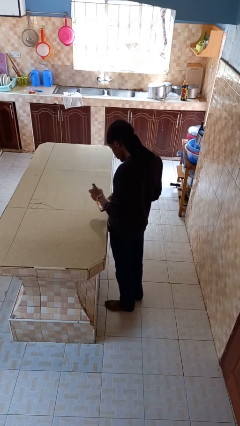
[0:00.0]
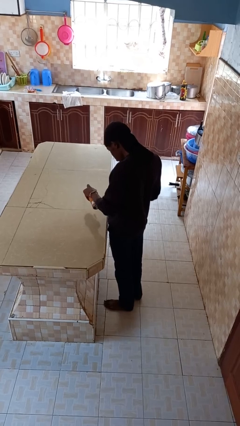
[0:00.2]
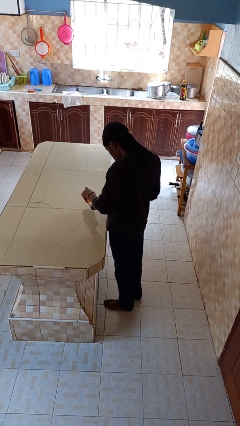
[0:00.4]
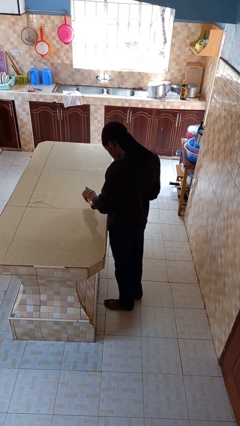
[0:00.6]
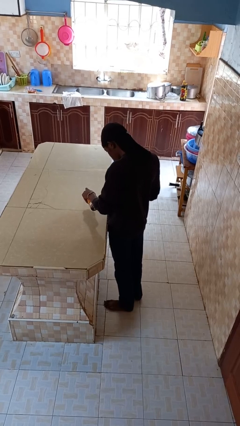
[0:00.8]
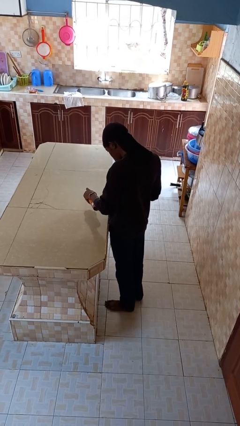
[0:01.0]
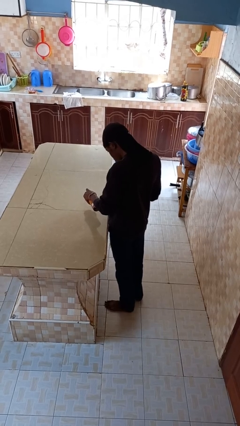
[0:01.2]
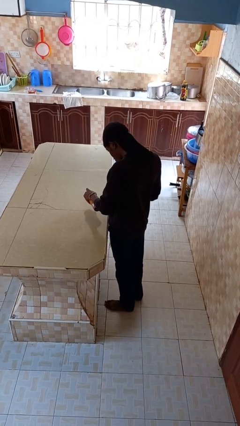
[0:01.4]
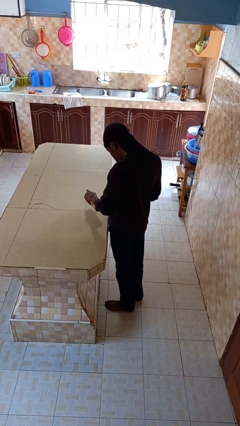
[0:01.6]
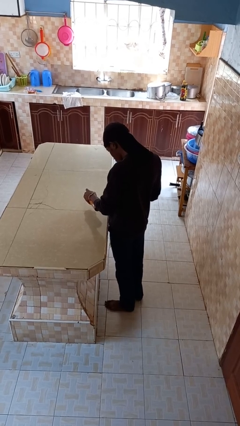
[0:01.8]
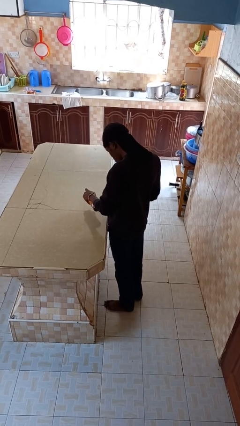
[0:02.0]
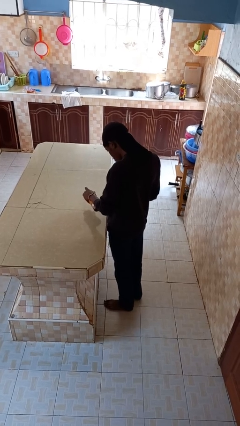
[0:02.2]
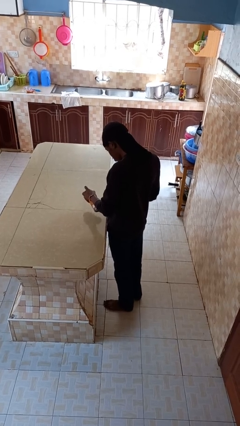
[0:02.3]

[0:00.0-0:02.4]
person sprays from bottle

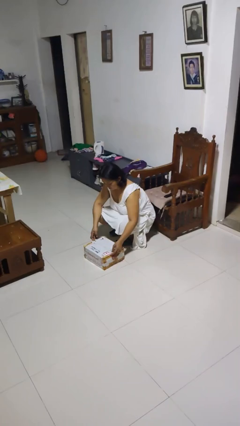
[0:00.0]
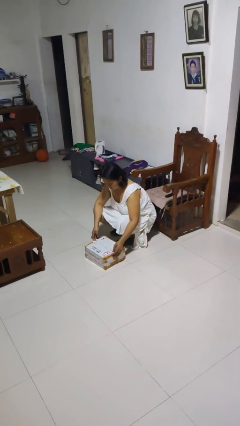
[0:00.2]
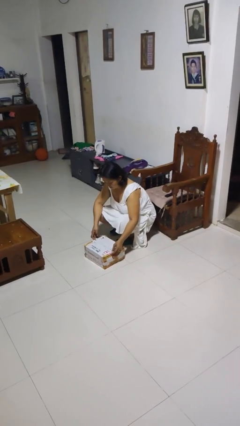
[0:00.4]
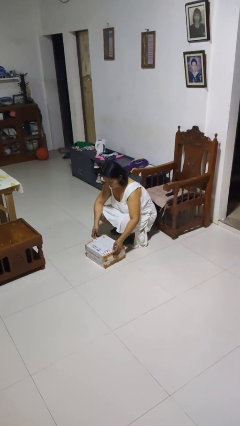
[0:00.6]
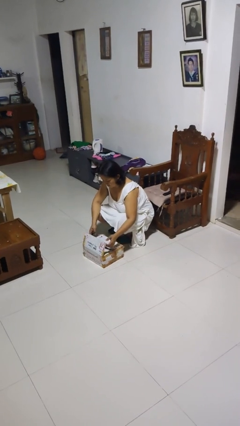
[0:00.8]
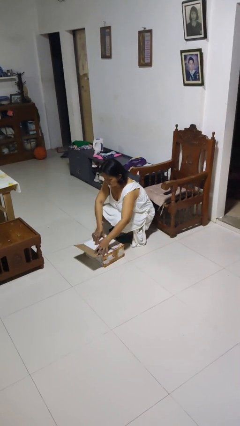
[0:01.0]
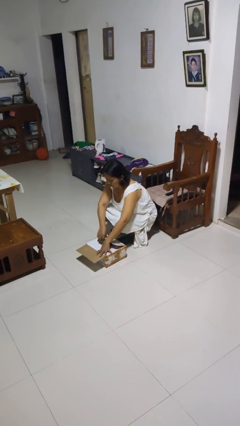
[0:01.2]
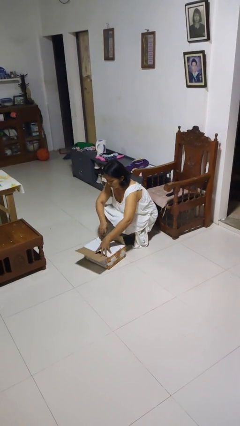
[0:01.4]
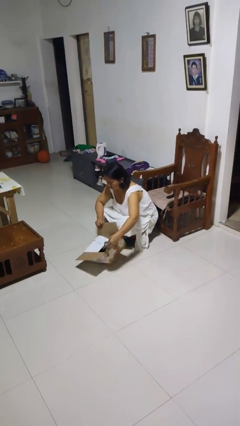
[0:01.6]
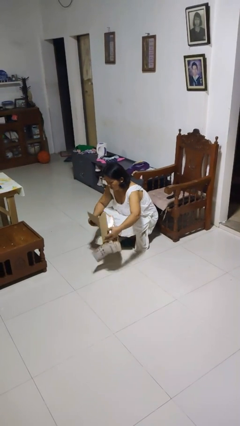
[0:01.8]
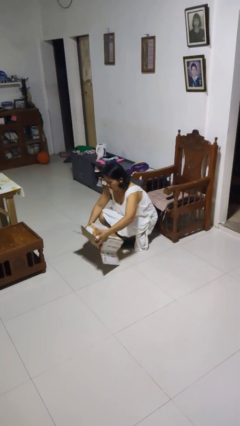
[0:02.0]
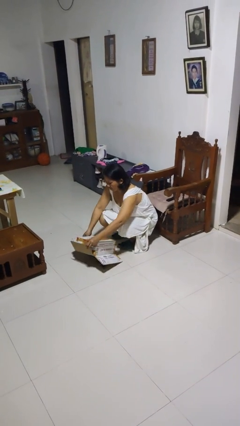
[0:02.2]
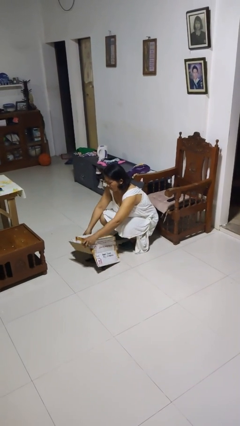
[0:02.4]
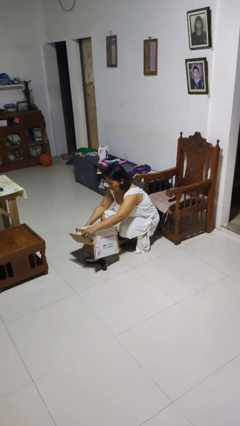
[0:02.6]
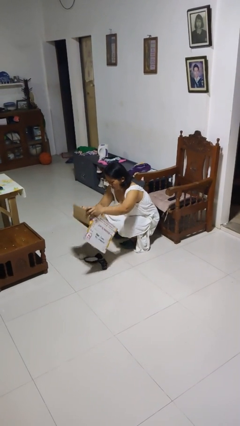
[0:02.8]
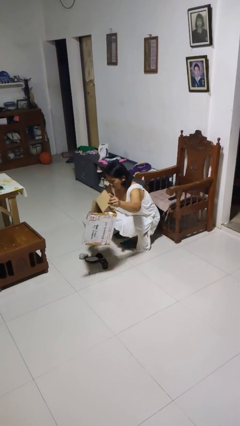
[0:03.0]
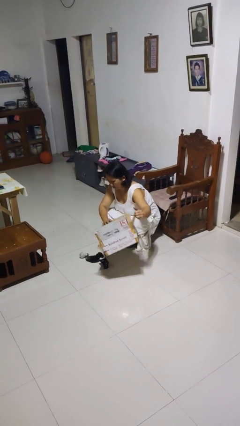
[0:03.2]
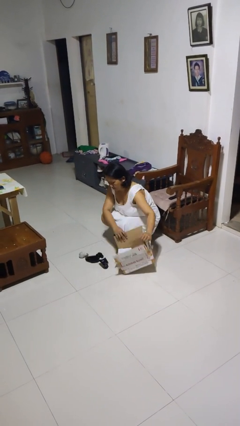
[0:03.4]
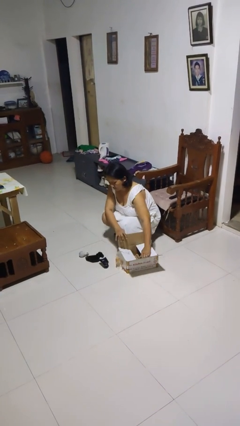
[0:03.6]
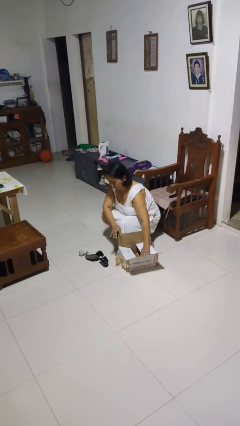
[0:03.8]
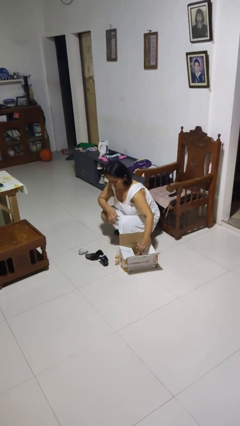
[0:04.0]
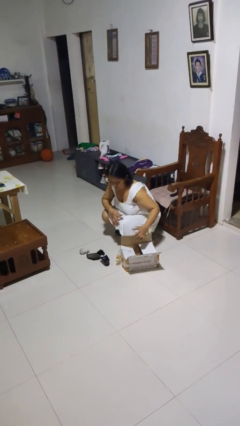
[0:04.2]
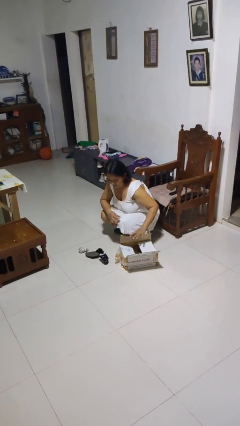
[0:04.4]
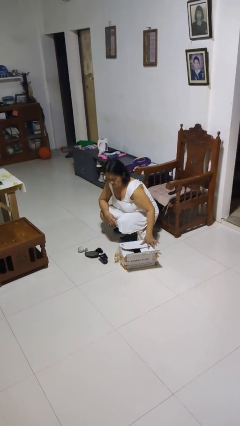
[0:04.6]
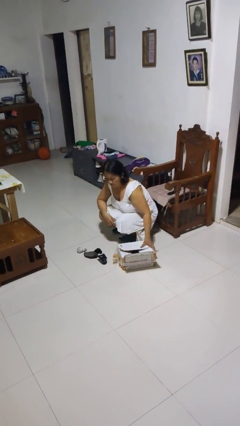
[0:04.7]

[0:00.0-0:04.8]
person unloads box onto floor

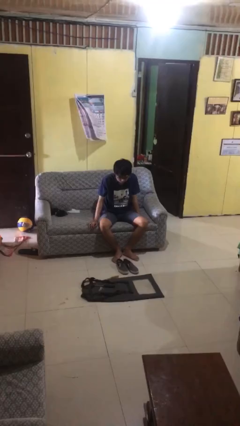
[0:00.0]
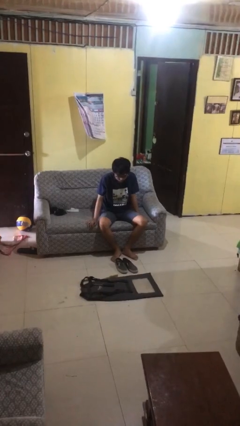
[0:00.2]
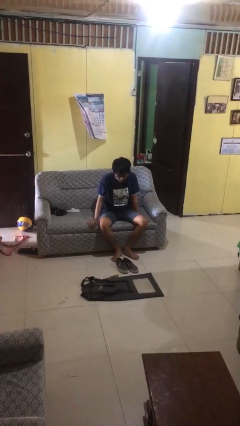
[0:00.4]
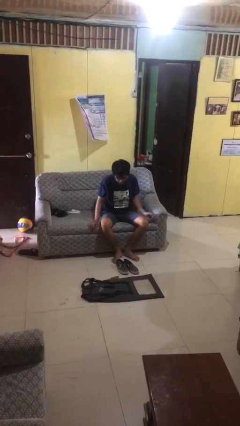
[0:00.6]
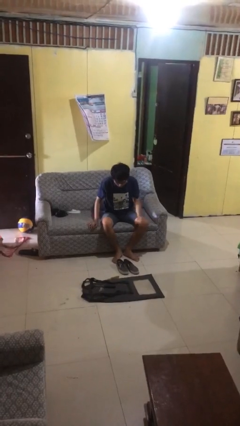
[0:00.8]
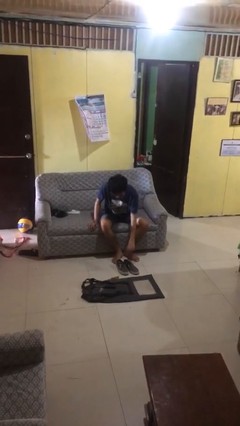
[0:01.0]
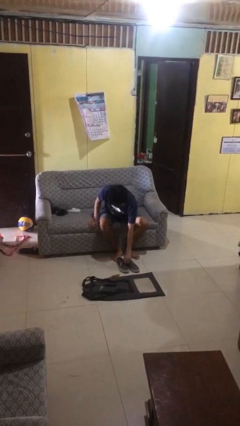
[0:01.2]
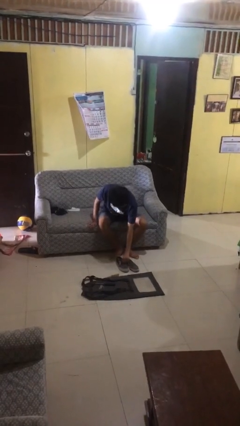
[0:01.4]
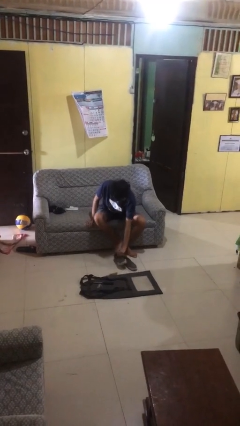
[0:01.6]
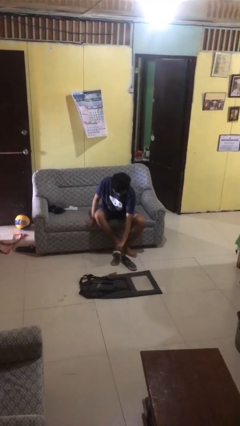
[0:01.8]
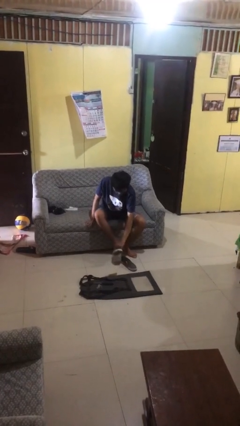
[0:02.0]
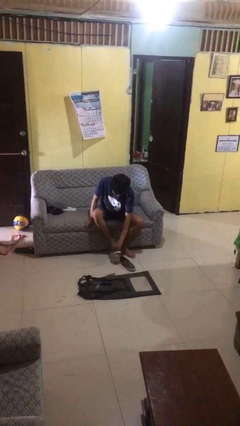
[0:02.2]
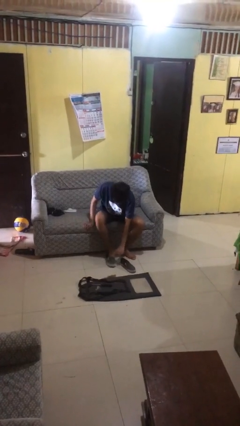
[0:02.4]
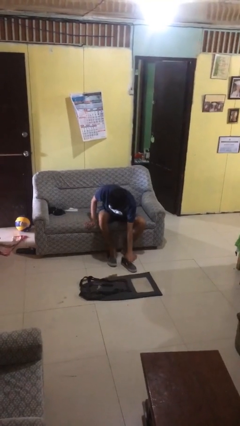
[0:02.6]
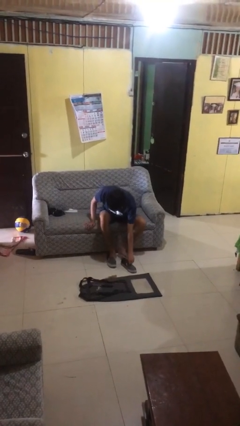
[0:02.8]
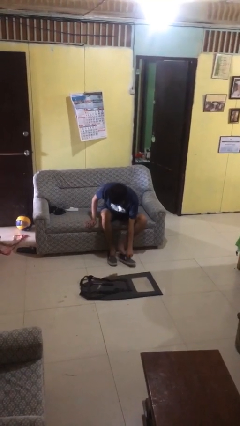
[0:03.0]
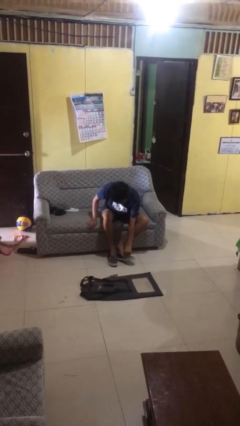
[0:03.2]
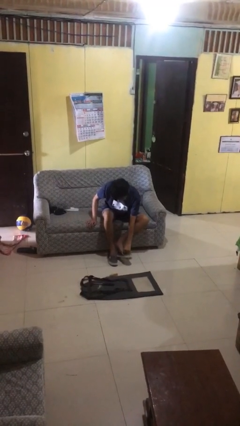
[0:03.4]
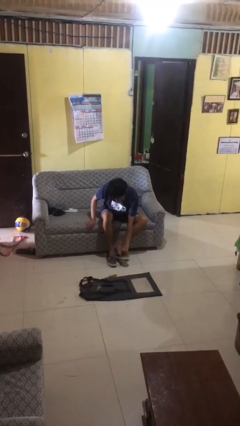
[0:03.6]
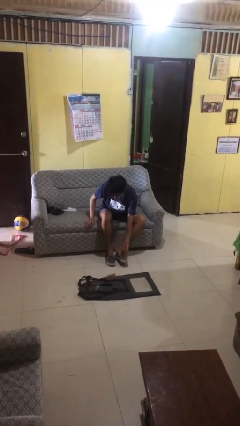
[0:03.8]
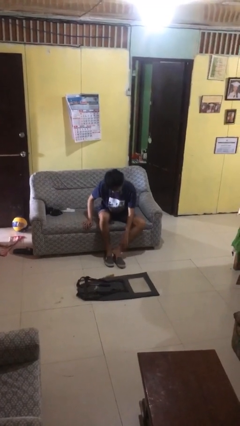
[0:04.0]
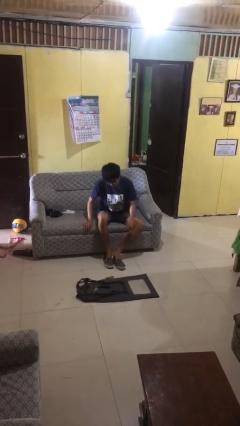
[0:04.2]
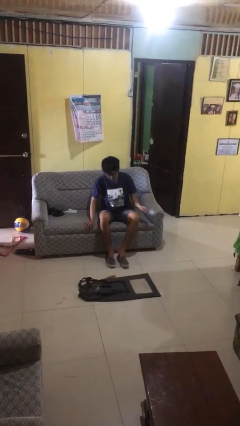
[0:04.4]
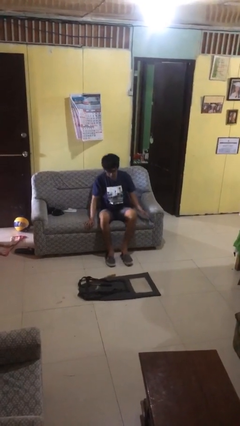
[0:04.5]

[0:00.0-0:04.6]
person puts on shoes

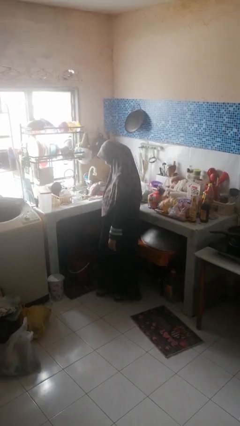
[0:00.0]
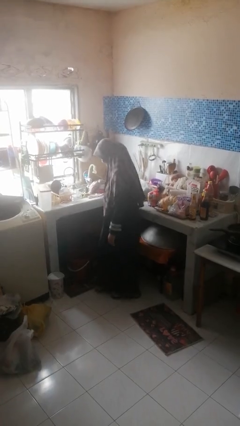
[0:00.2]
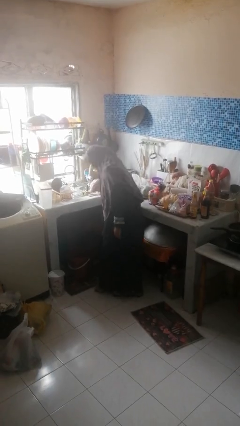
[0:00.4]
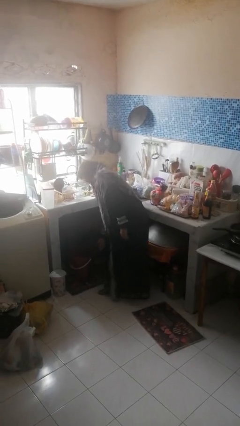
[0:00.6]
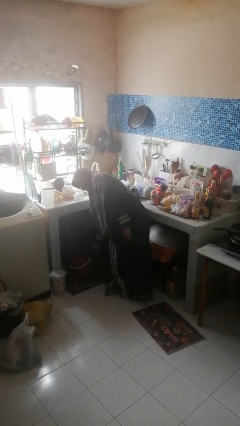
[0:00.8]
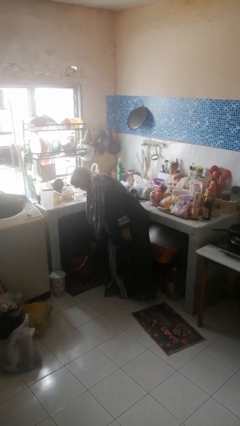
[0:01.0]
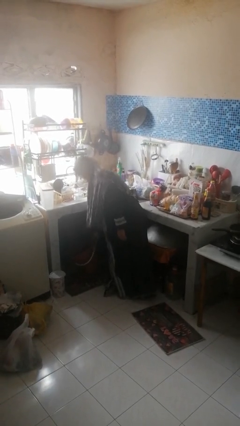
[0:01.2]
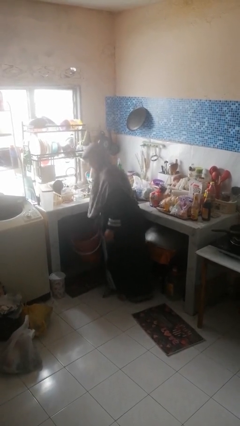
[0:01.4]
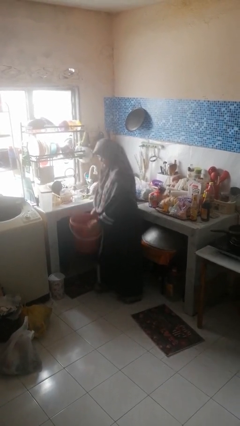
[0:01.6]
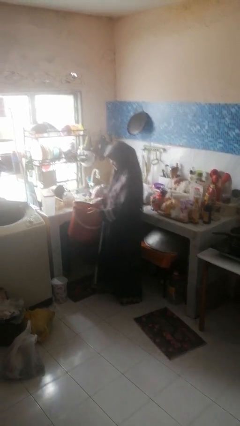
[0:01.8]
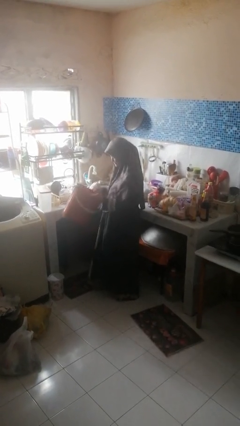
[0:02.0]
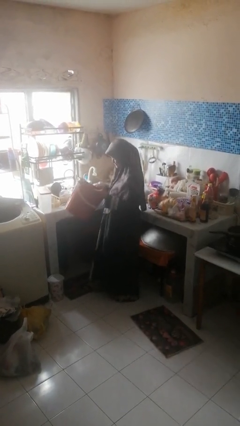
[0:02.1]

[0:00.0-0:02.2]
person picks up object from cabinet

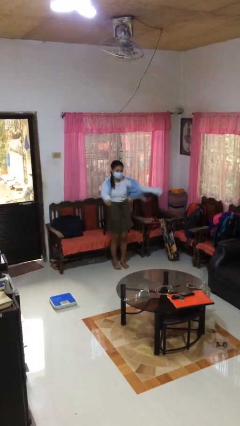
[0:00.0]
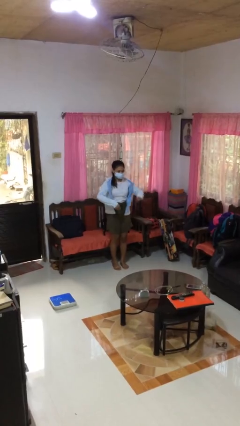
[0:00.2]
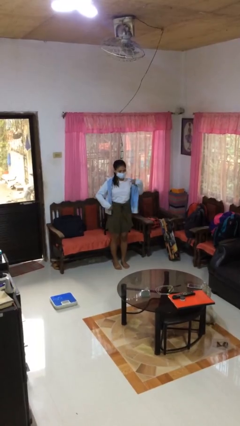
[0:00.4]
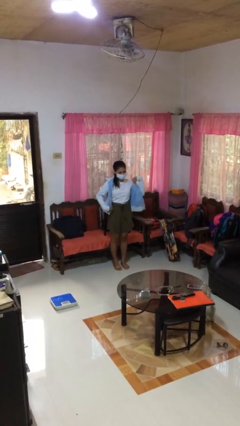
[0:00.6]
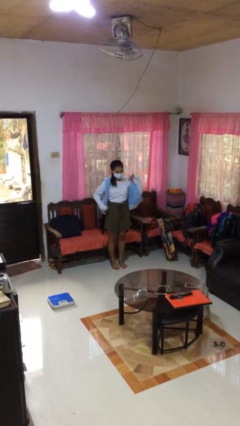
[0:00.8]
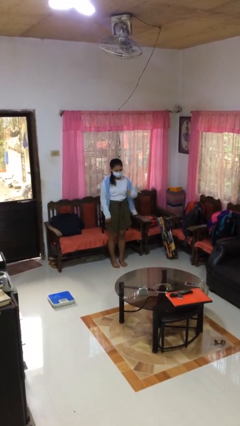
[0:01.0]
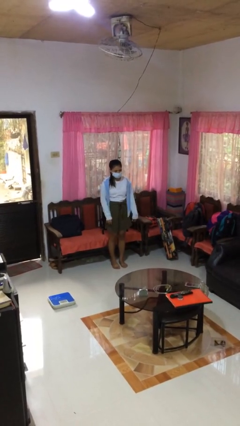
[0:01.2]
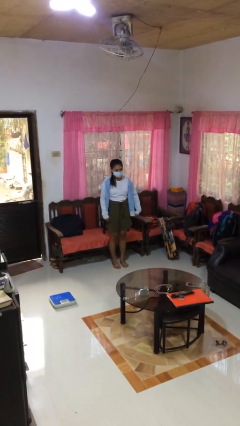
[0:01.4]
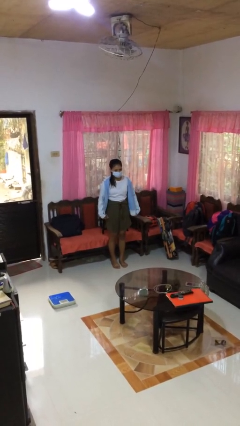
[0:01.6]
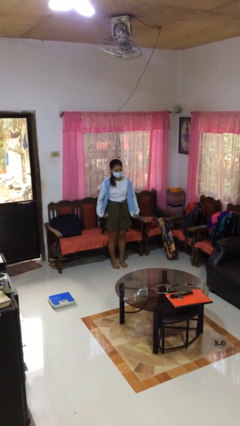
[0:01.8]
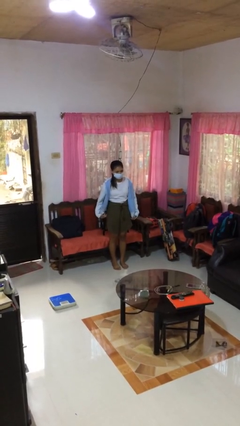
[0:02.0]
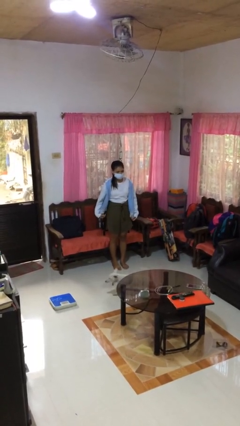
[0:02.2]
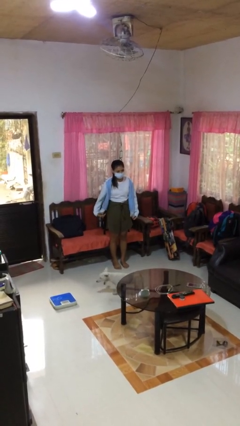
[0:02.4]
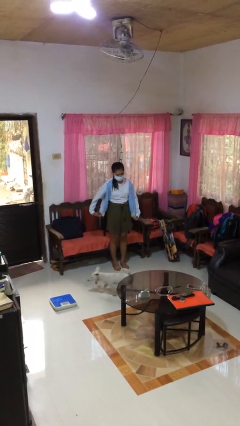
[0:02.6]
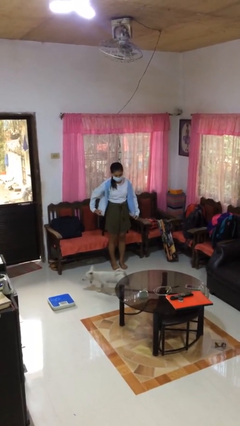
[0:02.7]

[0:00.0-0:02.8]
person puts on jacket

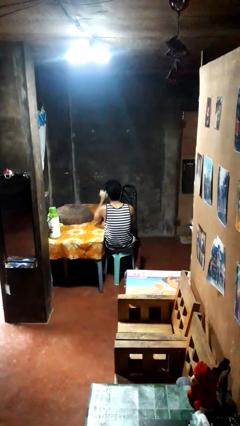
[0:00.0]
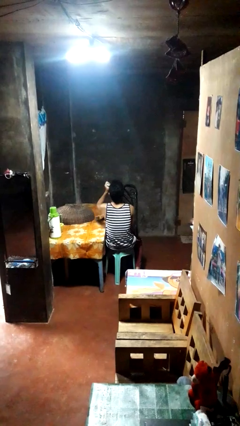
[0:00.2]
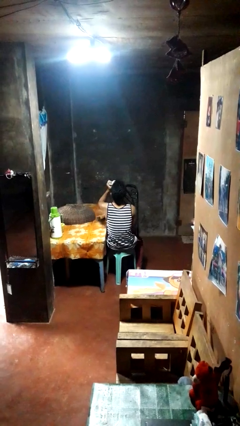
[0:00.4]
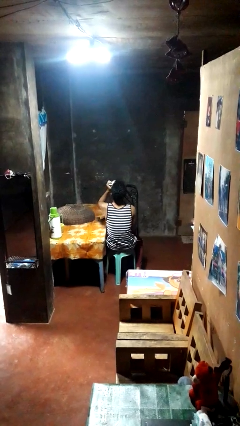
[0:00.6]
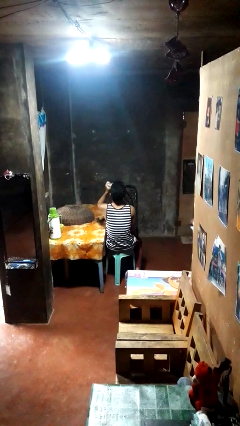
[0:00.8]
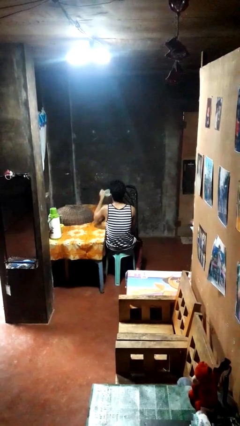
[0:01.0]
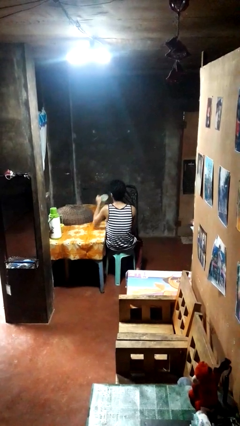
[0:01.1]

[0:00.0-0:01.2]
person drinks from mug
